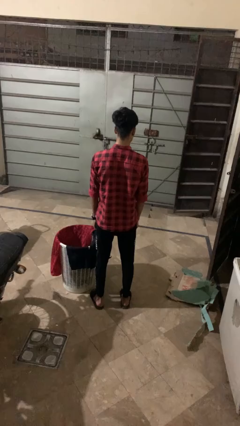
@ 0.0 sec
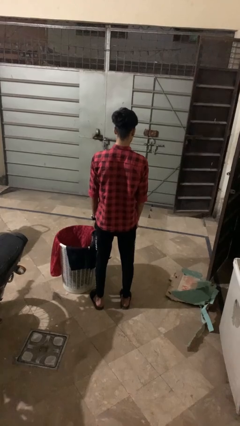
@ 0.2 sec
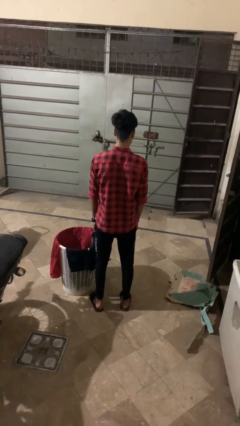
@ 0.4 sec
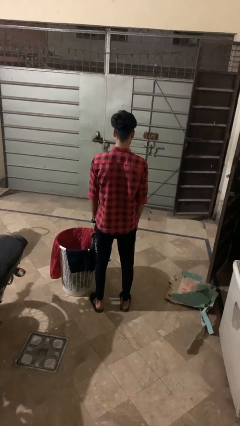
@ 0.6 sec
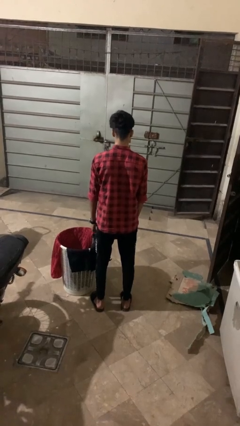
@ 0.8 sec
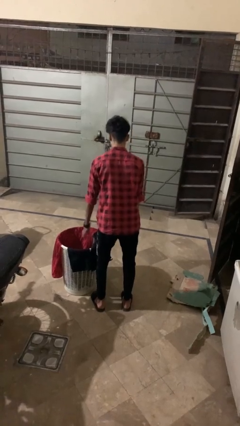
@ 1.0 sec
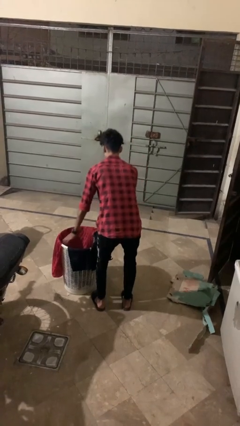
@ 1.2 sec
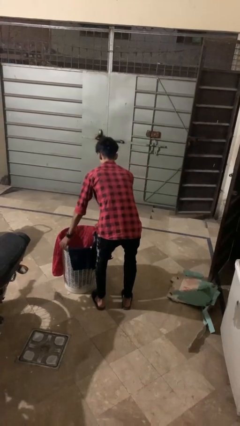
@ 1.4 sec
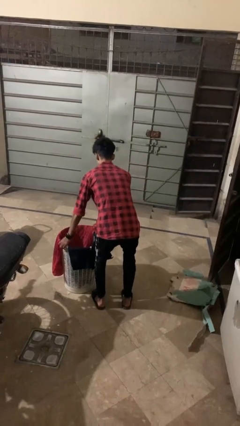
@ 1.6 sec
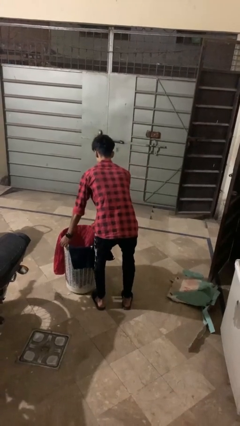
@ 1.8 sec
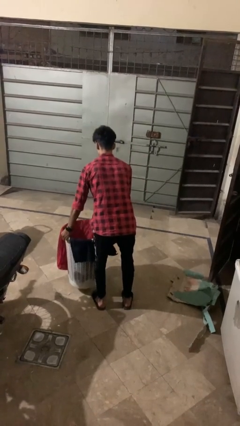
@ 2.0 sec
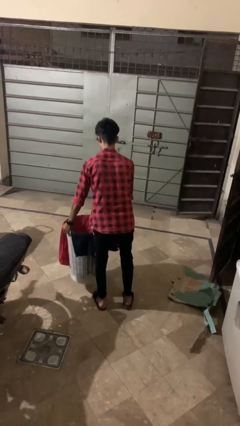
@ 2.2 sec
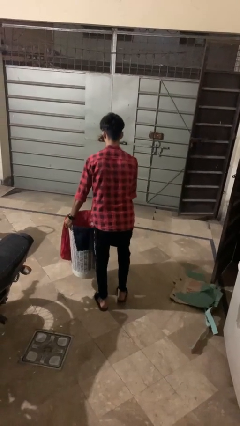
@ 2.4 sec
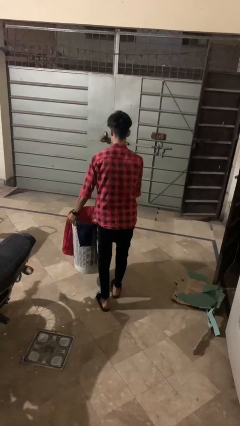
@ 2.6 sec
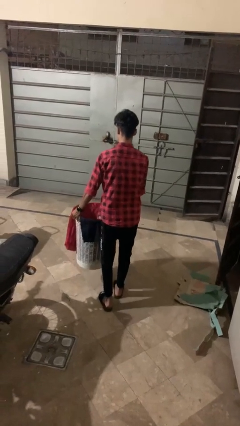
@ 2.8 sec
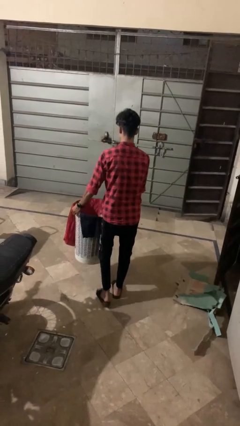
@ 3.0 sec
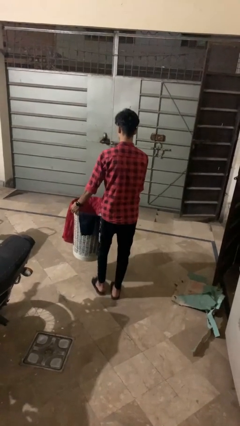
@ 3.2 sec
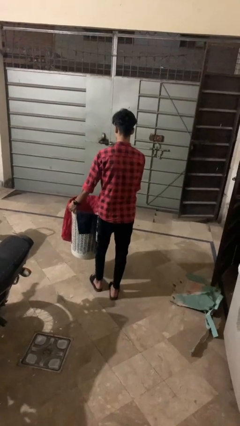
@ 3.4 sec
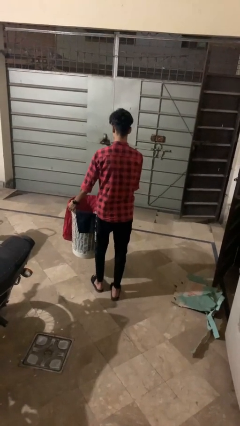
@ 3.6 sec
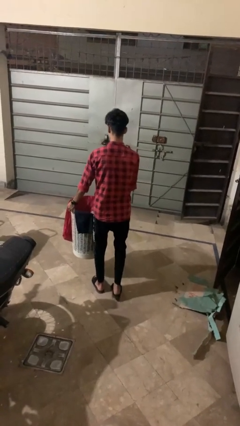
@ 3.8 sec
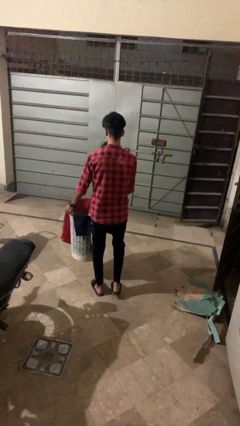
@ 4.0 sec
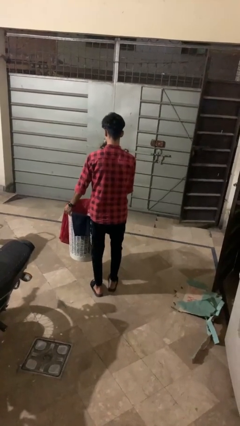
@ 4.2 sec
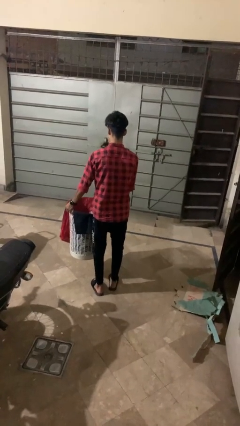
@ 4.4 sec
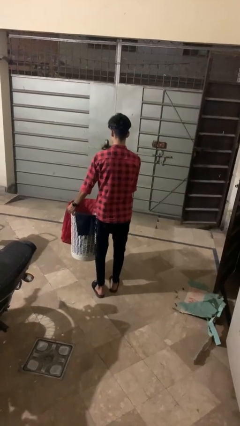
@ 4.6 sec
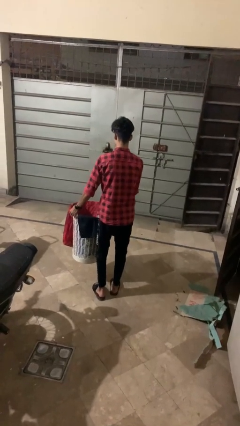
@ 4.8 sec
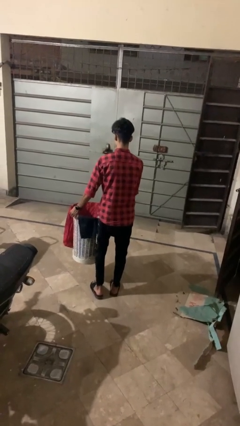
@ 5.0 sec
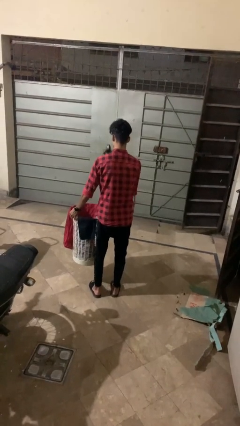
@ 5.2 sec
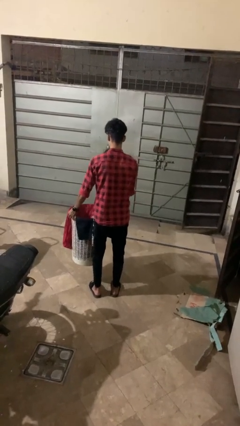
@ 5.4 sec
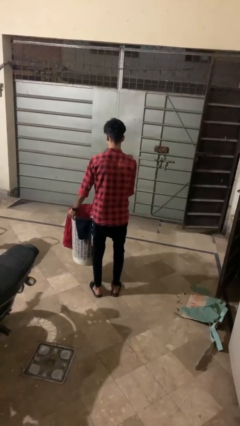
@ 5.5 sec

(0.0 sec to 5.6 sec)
person carries laundry basket

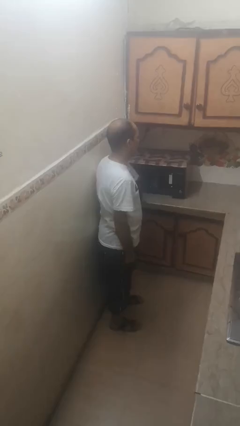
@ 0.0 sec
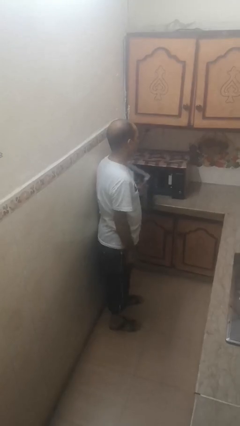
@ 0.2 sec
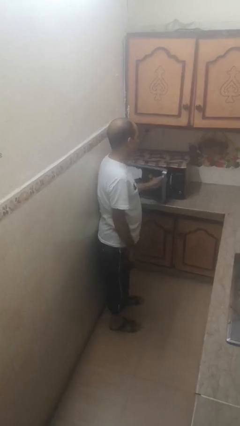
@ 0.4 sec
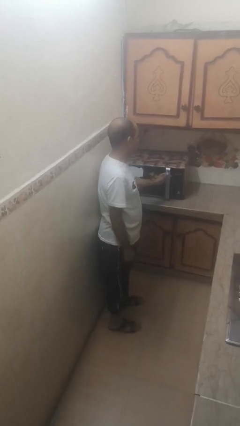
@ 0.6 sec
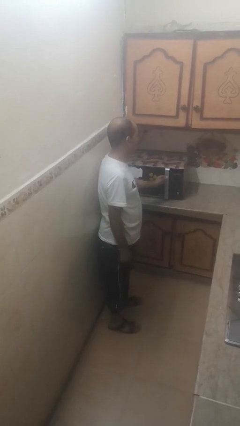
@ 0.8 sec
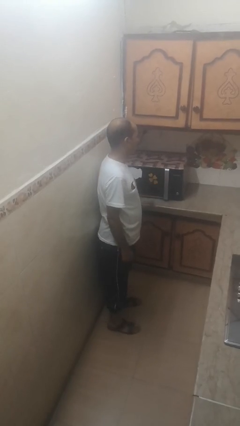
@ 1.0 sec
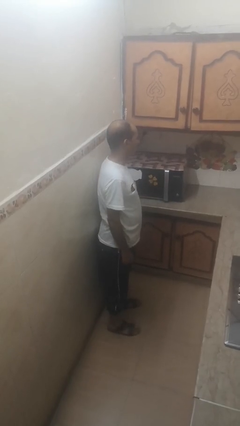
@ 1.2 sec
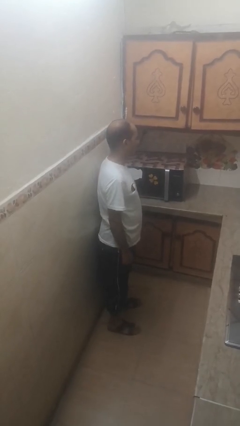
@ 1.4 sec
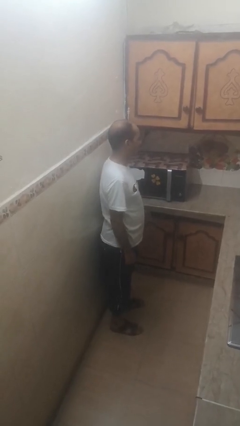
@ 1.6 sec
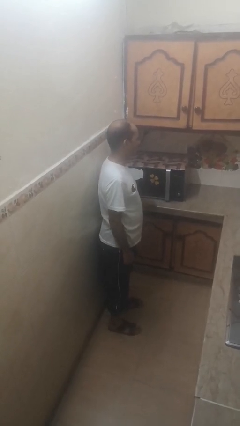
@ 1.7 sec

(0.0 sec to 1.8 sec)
person closes microwave

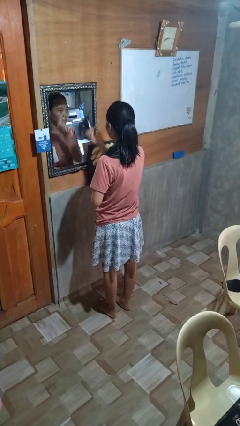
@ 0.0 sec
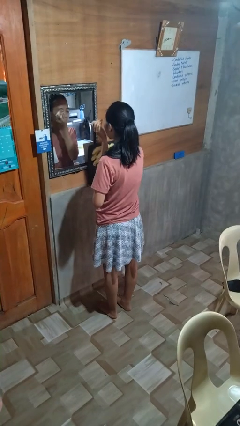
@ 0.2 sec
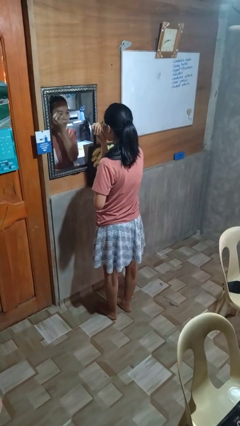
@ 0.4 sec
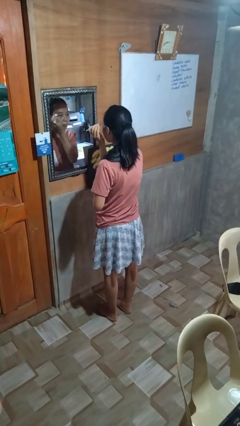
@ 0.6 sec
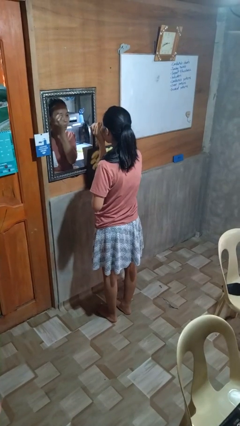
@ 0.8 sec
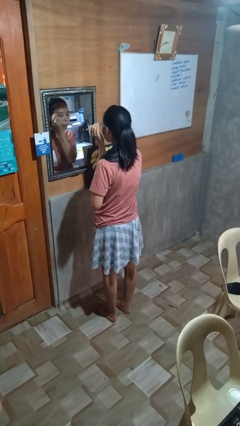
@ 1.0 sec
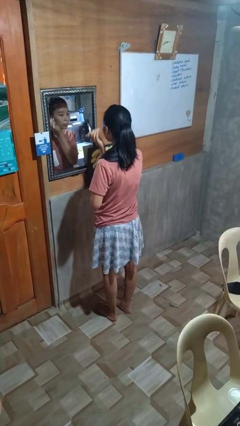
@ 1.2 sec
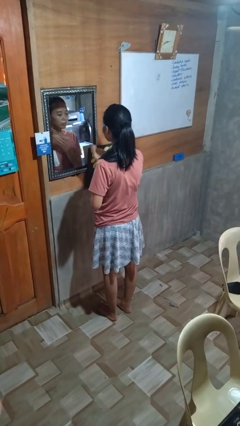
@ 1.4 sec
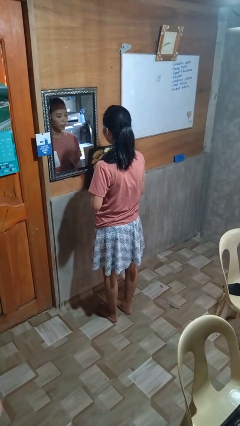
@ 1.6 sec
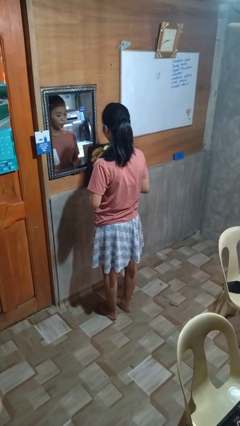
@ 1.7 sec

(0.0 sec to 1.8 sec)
person applies eye makeup

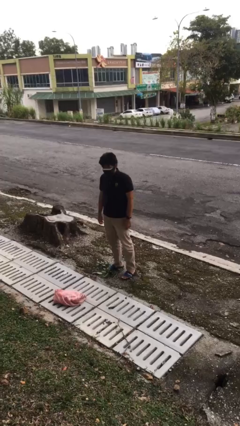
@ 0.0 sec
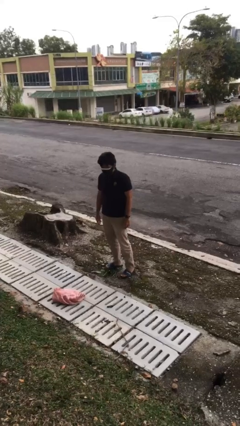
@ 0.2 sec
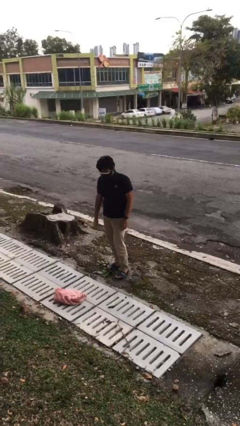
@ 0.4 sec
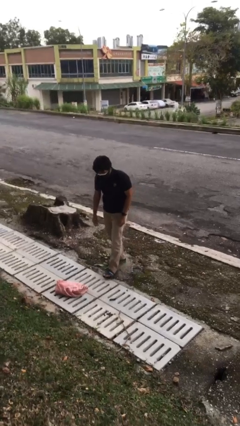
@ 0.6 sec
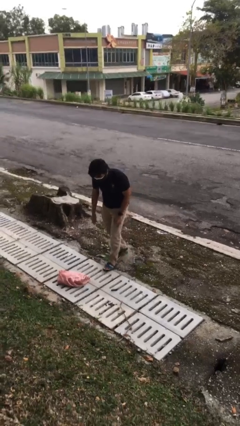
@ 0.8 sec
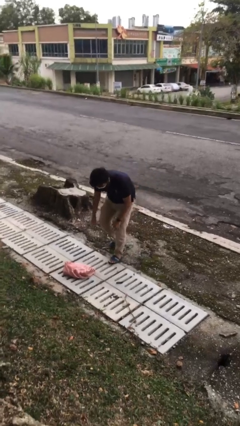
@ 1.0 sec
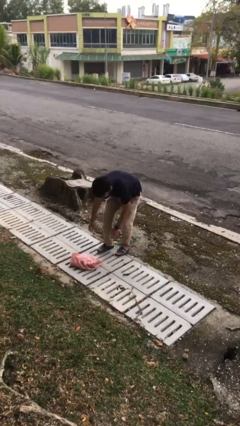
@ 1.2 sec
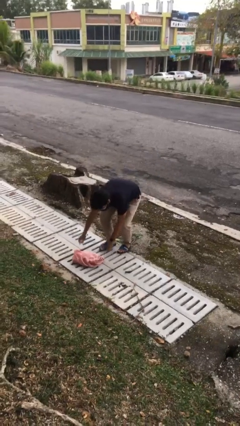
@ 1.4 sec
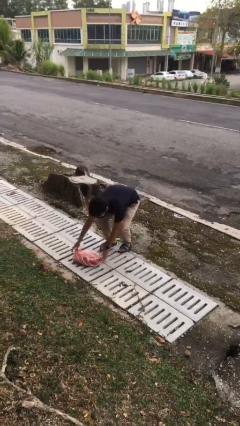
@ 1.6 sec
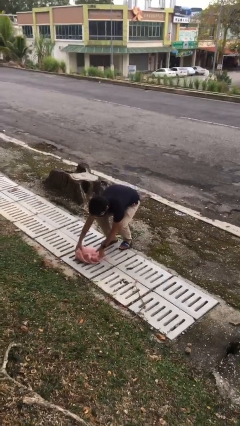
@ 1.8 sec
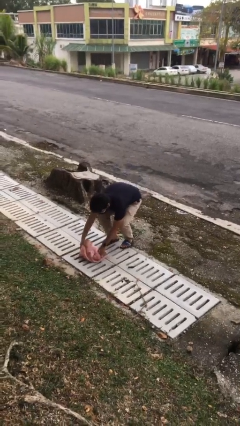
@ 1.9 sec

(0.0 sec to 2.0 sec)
person picks up object from floor

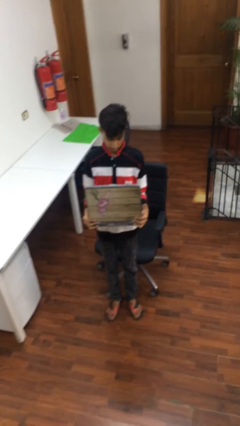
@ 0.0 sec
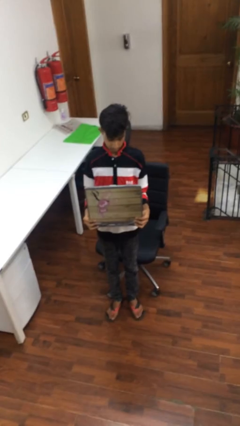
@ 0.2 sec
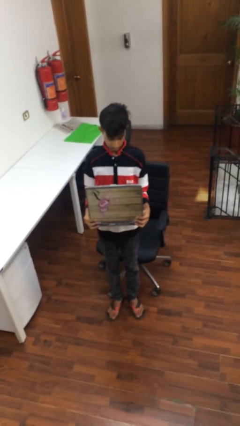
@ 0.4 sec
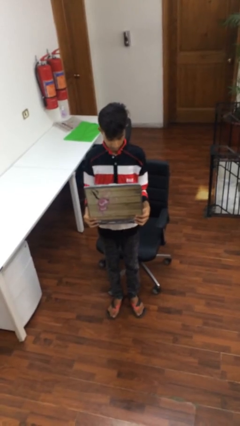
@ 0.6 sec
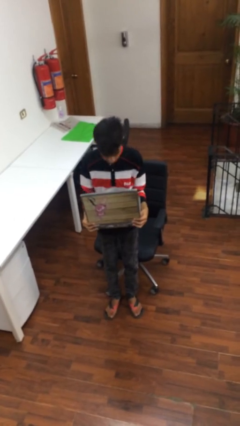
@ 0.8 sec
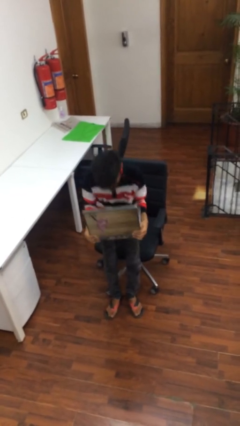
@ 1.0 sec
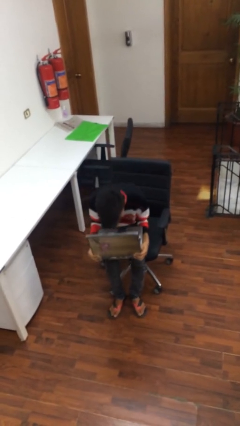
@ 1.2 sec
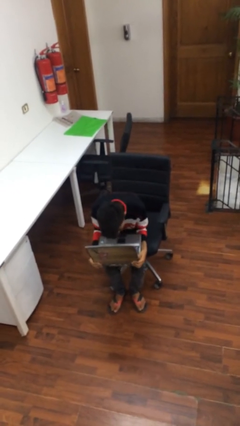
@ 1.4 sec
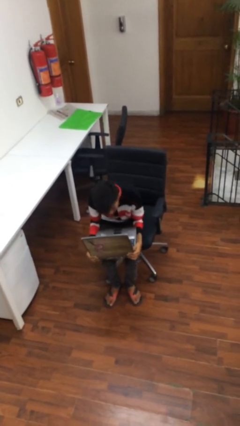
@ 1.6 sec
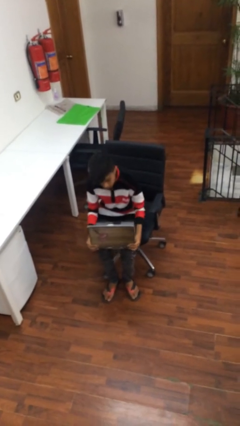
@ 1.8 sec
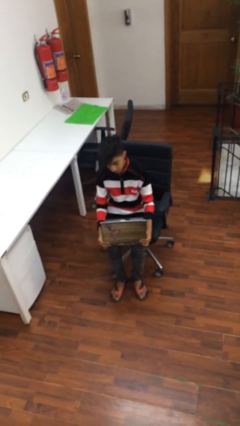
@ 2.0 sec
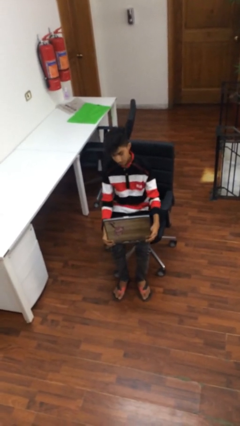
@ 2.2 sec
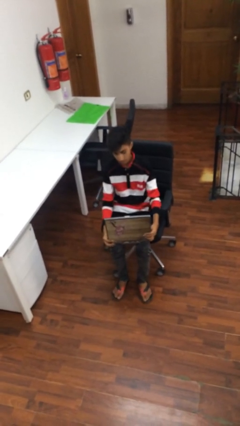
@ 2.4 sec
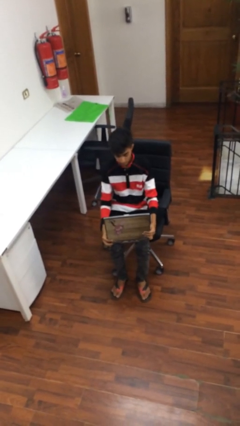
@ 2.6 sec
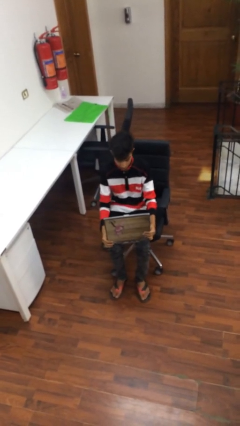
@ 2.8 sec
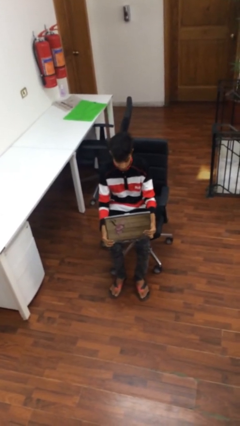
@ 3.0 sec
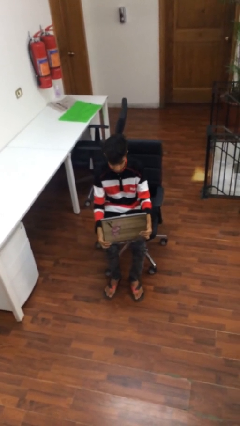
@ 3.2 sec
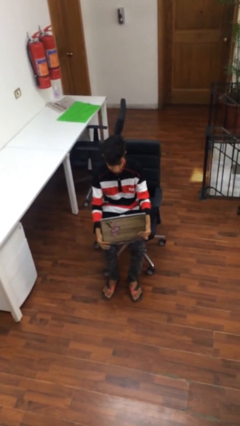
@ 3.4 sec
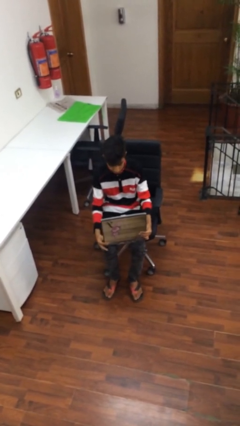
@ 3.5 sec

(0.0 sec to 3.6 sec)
person sits down

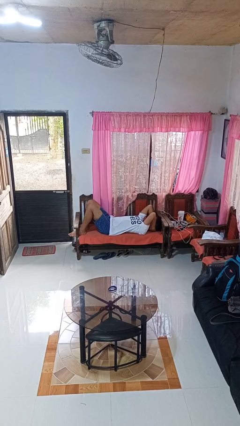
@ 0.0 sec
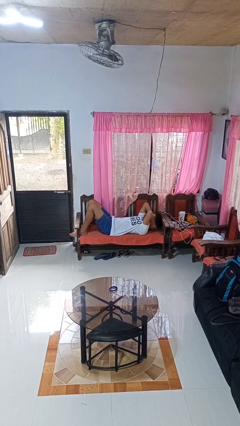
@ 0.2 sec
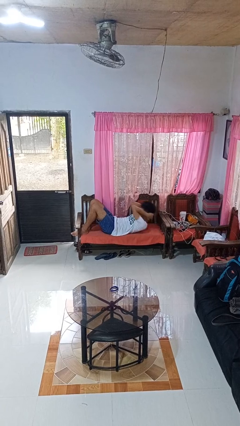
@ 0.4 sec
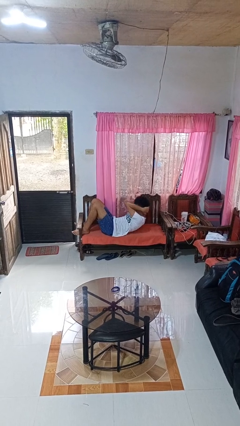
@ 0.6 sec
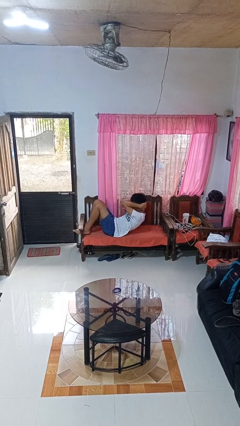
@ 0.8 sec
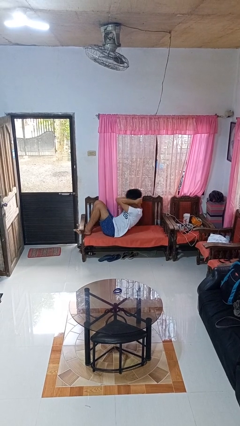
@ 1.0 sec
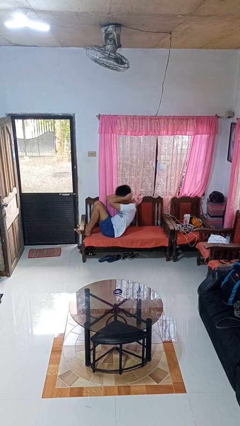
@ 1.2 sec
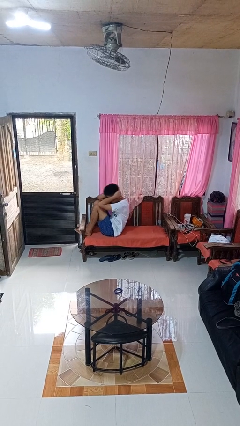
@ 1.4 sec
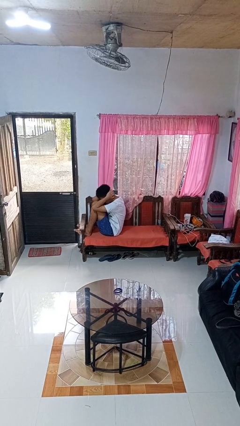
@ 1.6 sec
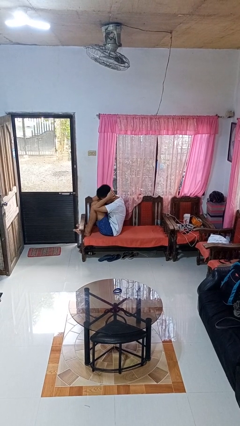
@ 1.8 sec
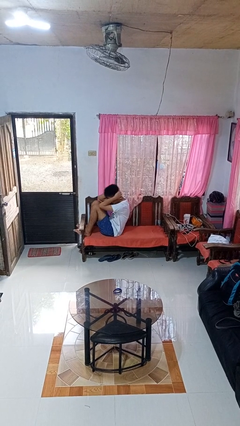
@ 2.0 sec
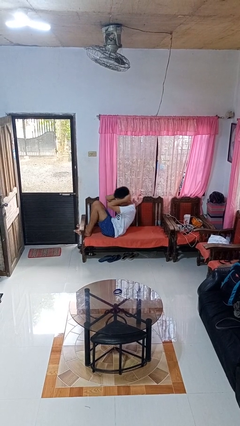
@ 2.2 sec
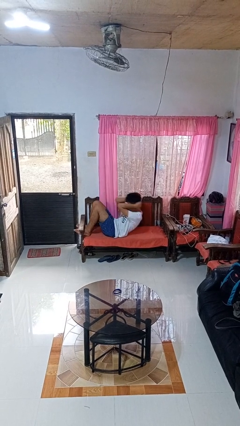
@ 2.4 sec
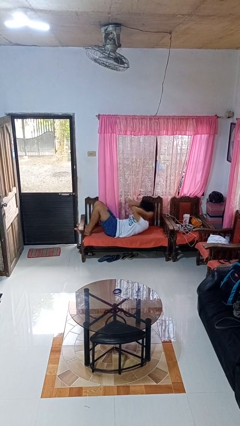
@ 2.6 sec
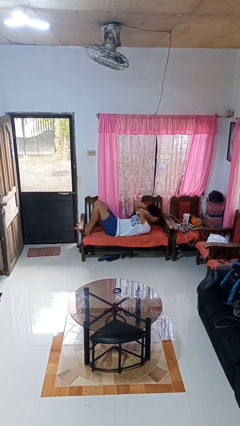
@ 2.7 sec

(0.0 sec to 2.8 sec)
person exercises with situp
